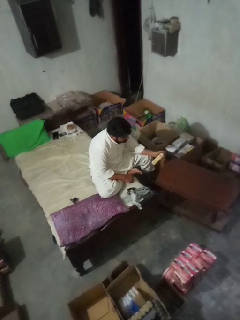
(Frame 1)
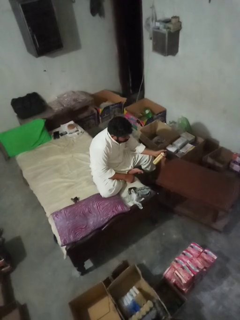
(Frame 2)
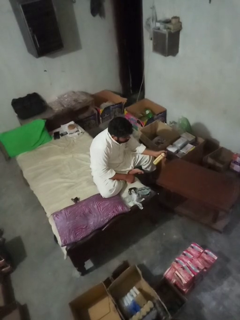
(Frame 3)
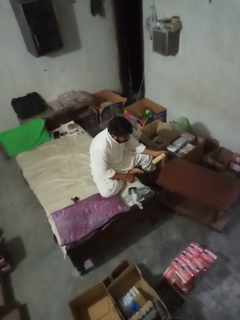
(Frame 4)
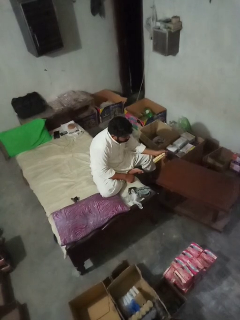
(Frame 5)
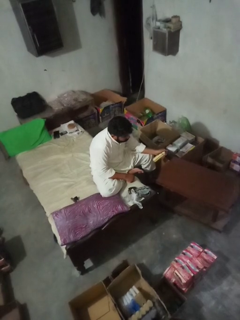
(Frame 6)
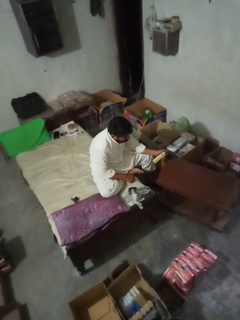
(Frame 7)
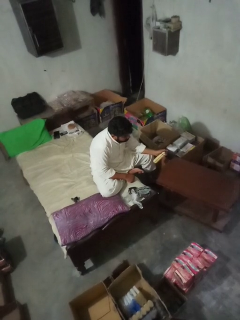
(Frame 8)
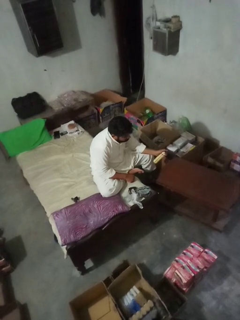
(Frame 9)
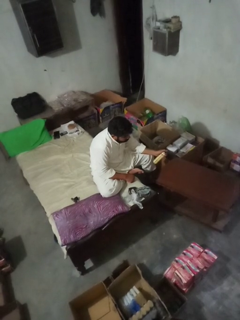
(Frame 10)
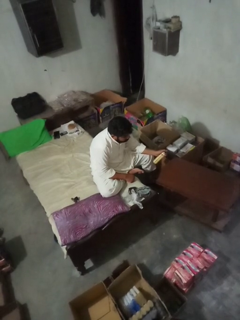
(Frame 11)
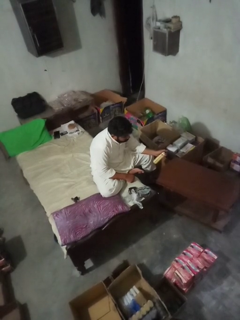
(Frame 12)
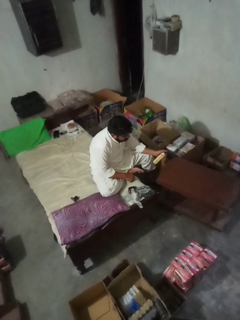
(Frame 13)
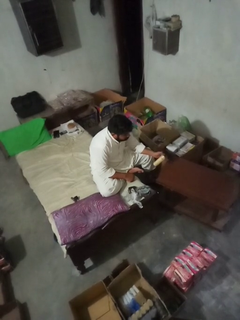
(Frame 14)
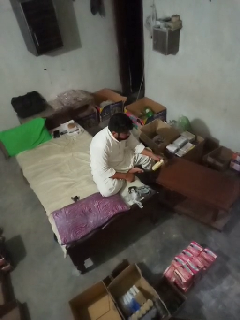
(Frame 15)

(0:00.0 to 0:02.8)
person sprays from bottle

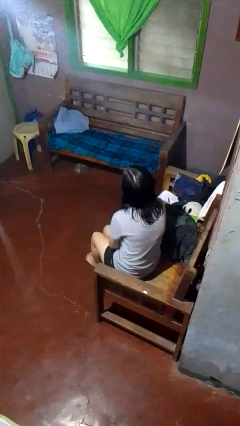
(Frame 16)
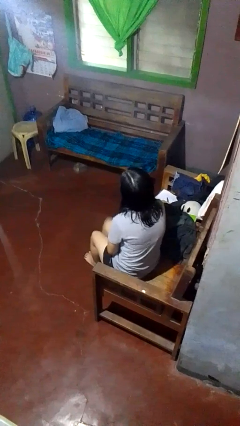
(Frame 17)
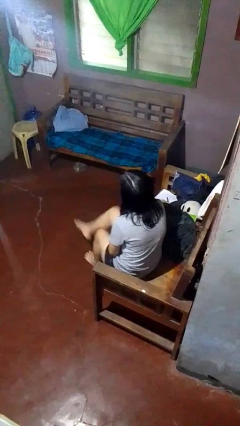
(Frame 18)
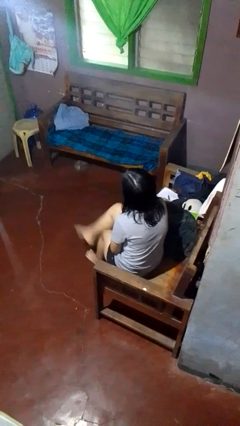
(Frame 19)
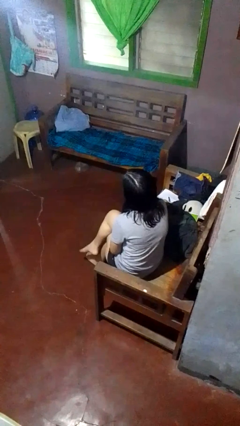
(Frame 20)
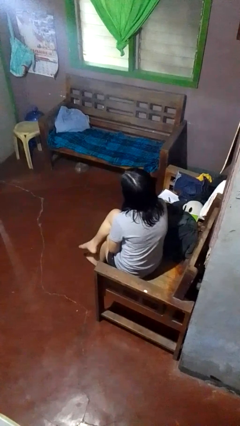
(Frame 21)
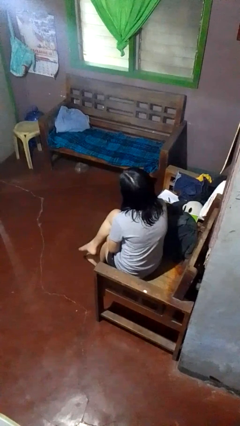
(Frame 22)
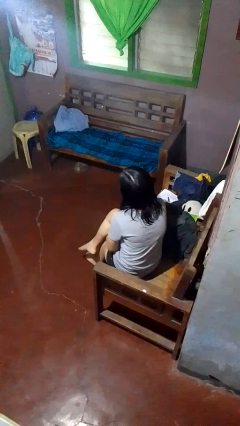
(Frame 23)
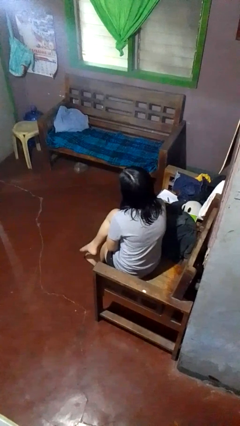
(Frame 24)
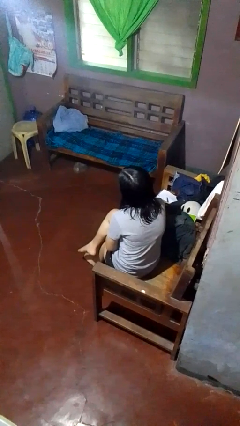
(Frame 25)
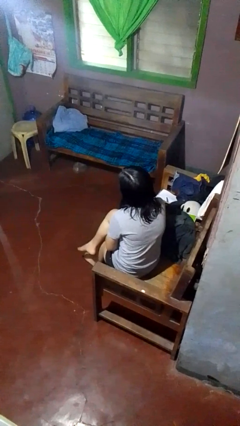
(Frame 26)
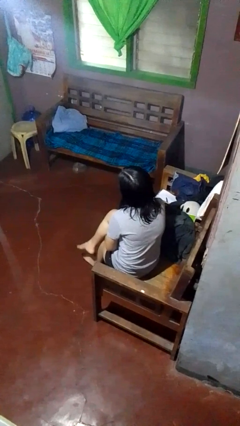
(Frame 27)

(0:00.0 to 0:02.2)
person crosses legs

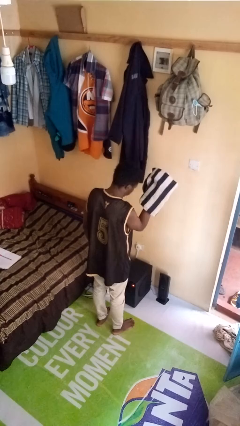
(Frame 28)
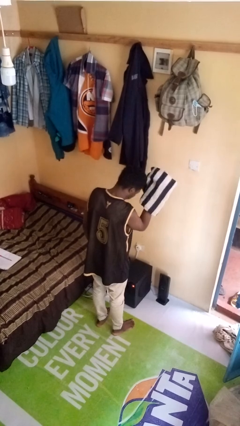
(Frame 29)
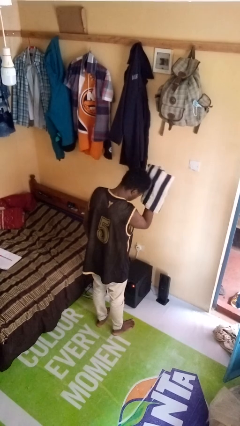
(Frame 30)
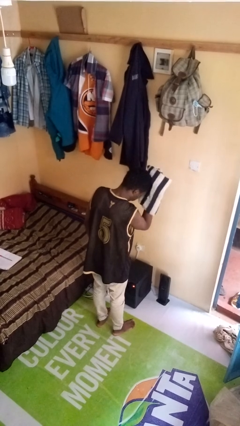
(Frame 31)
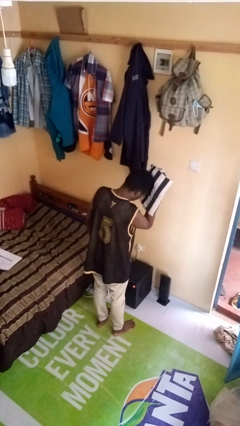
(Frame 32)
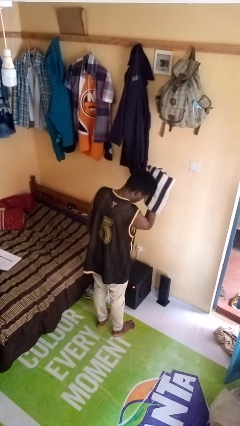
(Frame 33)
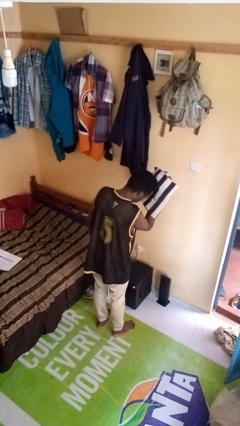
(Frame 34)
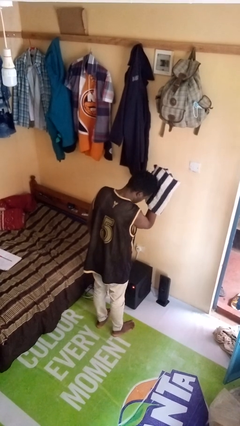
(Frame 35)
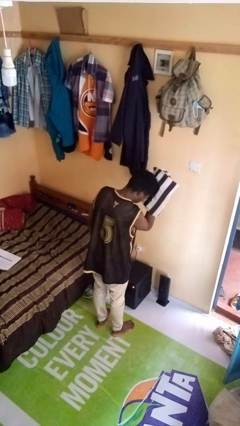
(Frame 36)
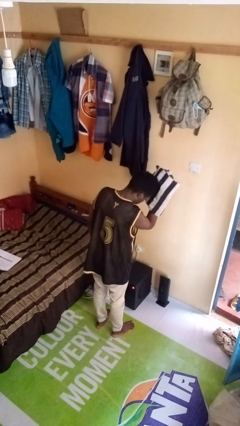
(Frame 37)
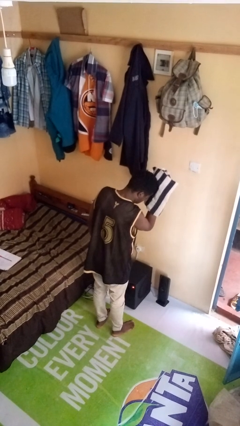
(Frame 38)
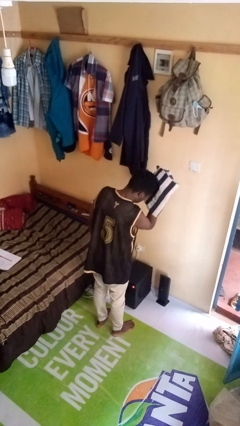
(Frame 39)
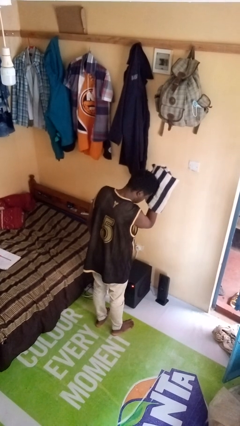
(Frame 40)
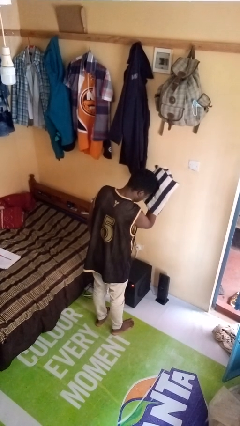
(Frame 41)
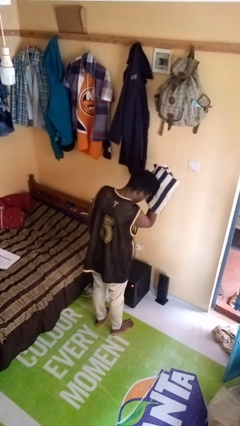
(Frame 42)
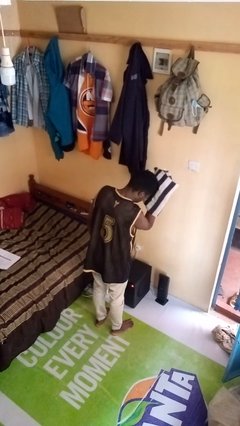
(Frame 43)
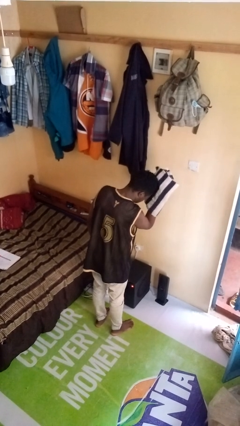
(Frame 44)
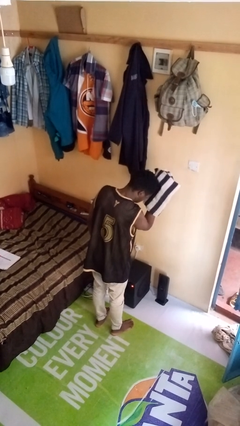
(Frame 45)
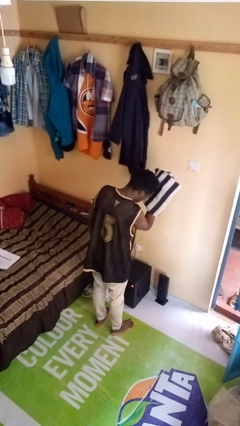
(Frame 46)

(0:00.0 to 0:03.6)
person dries hair with towel

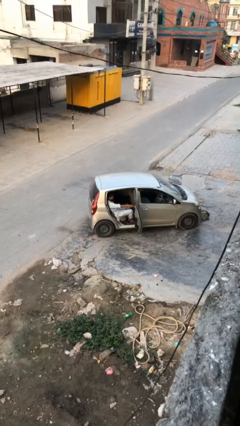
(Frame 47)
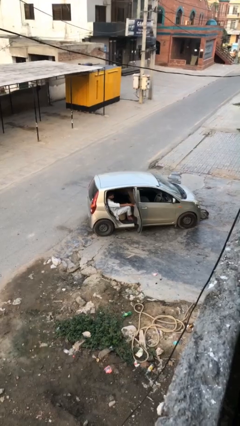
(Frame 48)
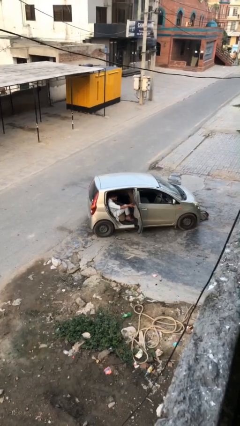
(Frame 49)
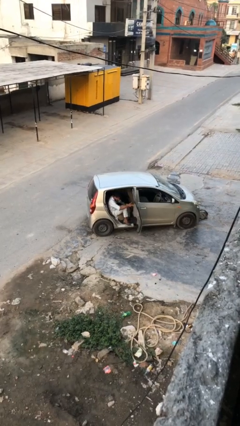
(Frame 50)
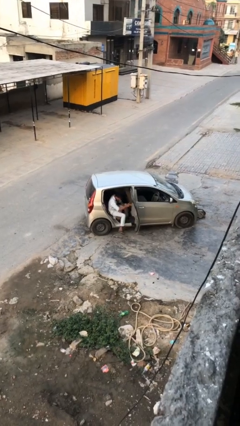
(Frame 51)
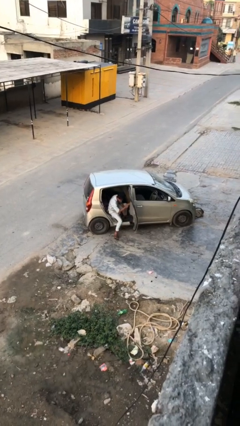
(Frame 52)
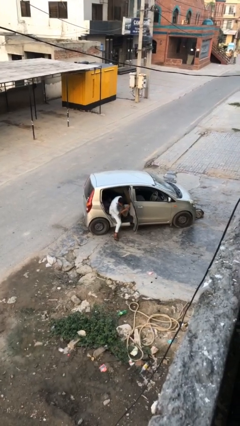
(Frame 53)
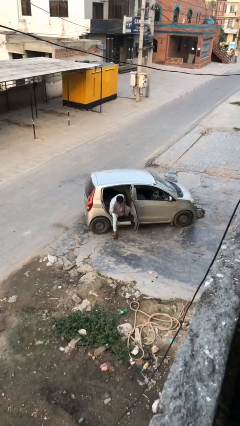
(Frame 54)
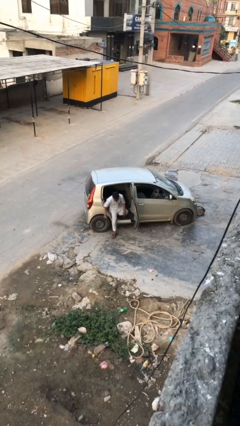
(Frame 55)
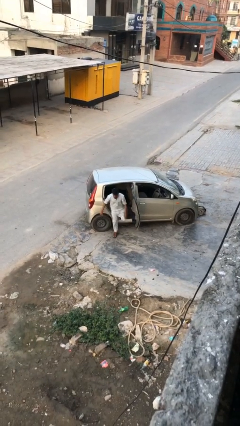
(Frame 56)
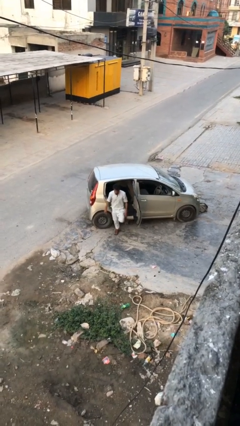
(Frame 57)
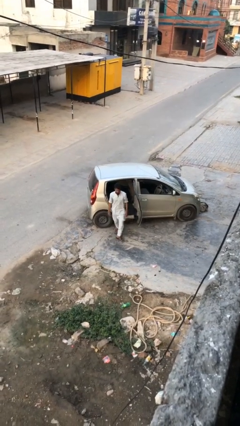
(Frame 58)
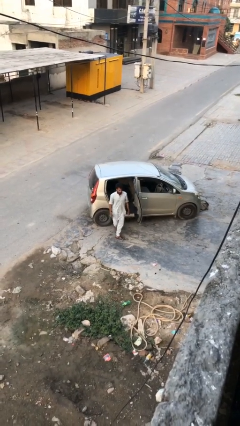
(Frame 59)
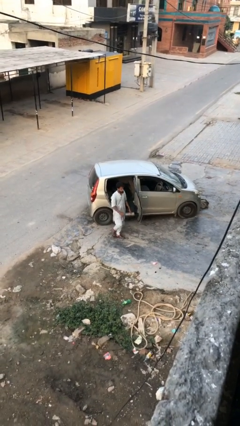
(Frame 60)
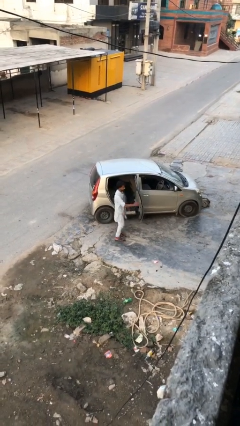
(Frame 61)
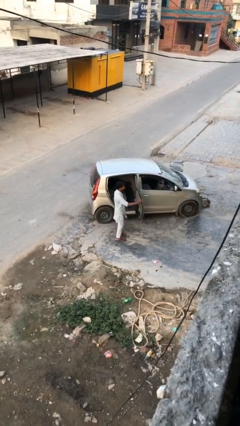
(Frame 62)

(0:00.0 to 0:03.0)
person exits car

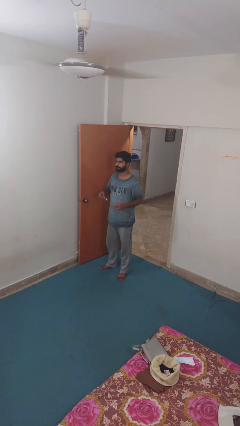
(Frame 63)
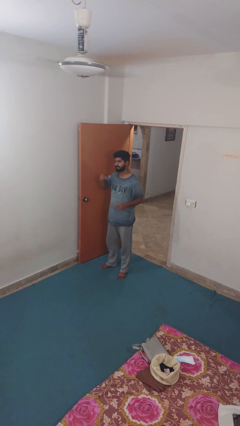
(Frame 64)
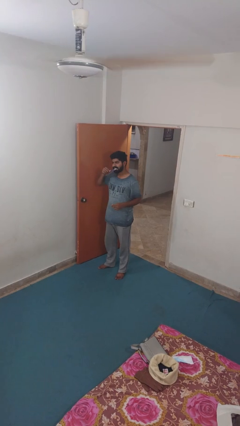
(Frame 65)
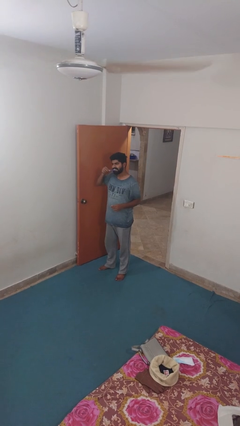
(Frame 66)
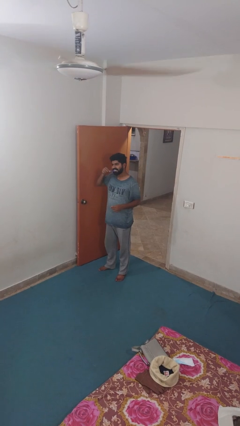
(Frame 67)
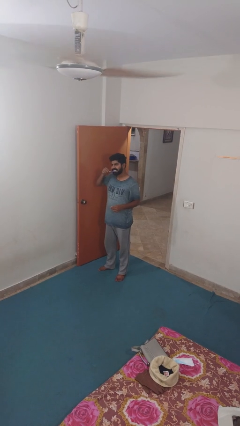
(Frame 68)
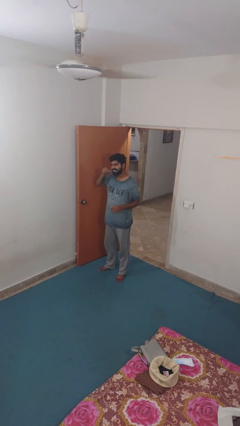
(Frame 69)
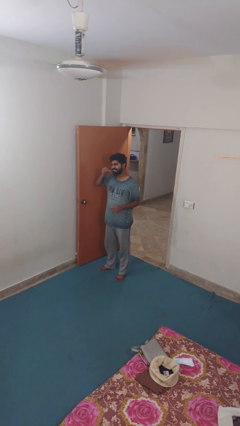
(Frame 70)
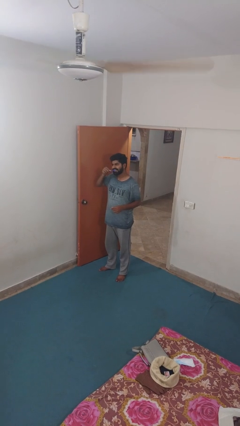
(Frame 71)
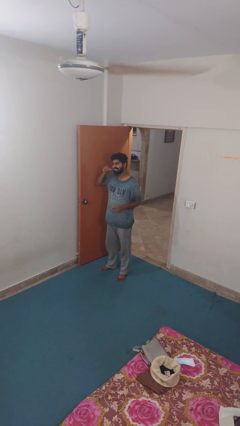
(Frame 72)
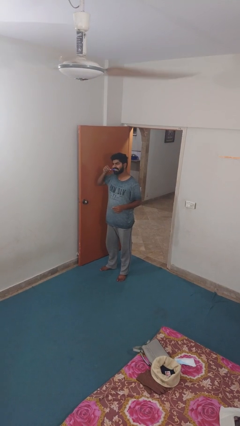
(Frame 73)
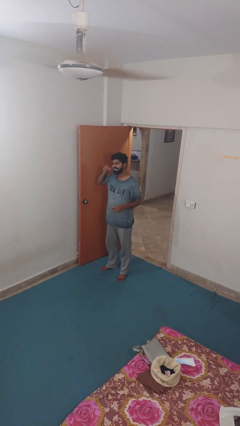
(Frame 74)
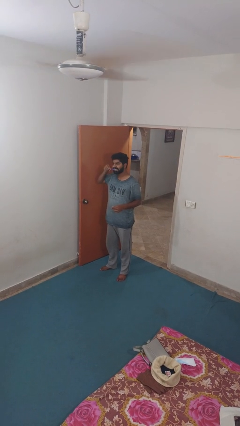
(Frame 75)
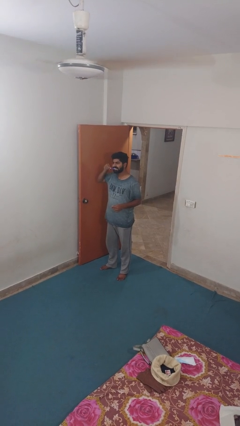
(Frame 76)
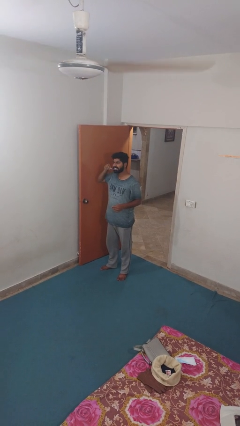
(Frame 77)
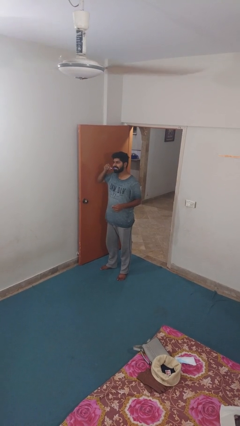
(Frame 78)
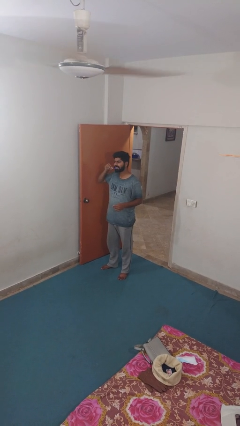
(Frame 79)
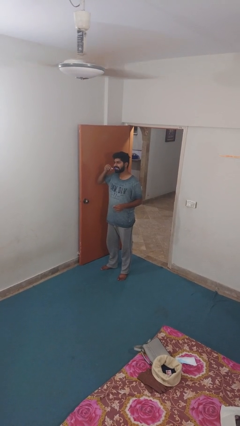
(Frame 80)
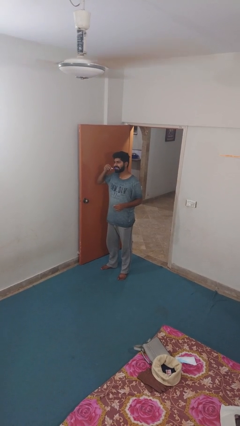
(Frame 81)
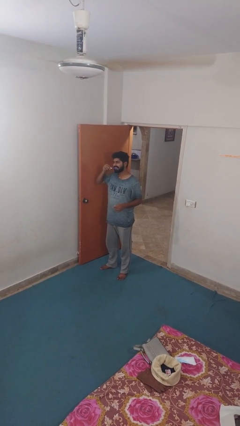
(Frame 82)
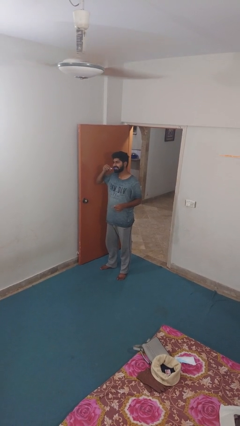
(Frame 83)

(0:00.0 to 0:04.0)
person brushes teeth

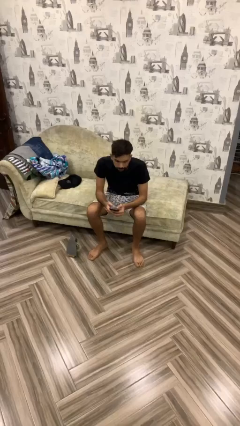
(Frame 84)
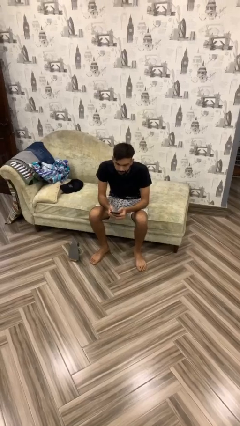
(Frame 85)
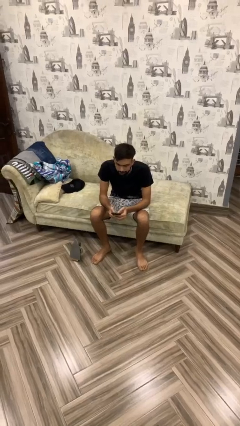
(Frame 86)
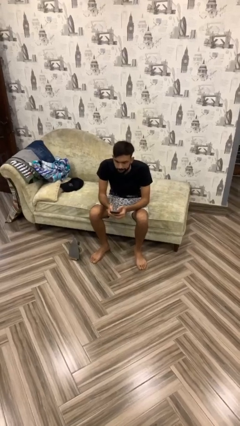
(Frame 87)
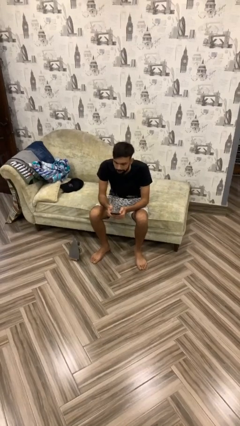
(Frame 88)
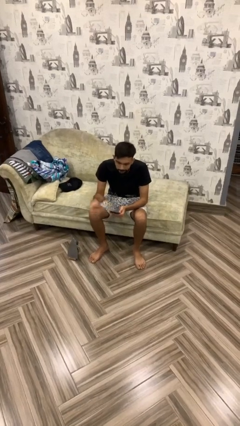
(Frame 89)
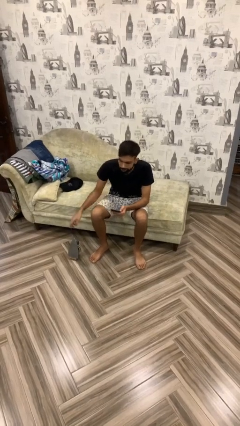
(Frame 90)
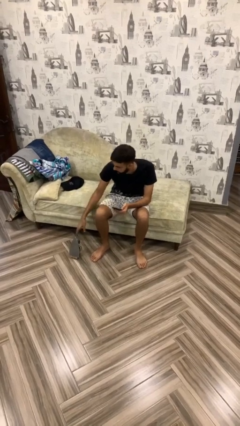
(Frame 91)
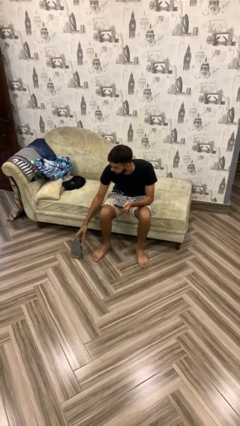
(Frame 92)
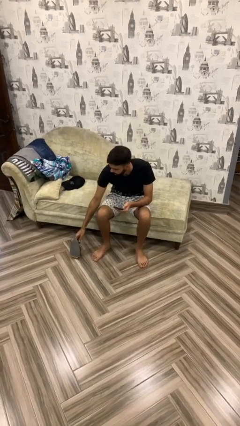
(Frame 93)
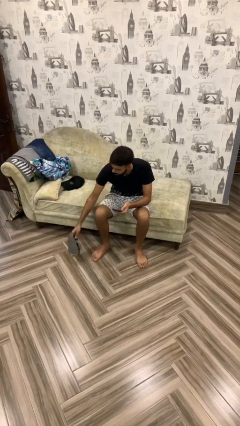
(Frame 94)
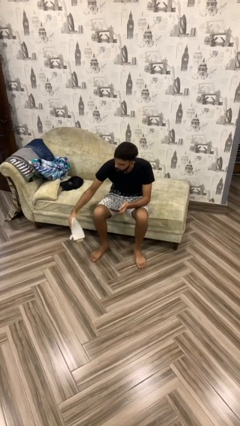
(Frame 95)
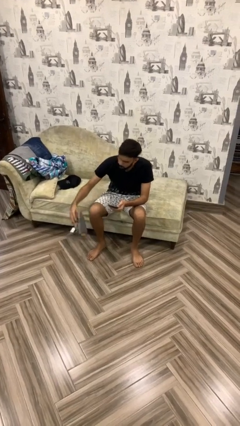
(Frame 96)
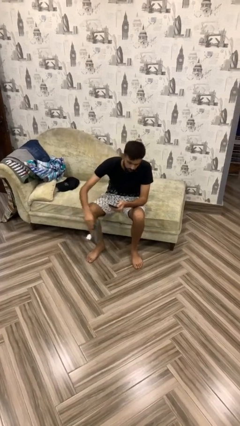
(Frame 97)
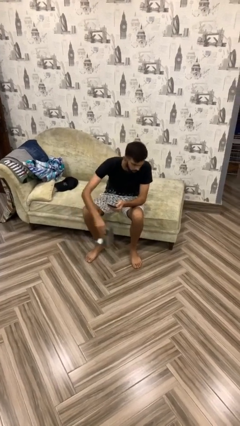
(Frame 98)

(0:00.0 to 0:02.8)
person picks up object from floor
